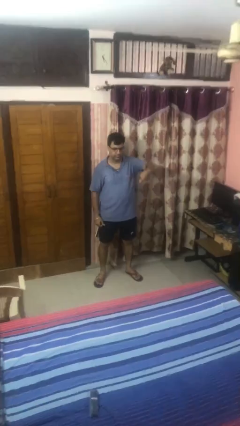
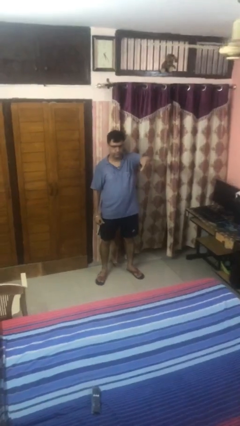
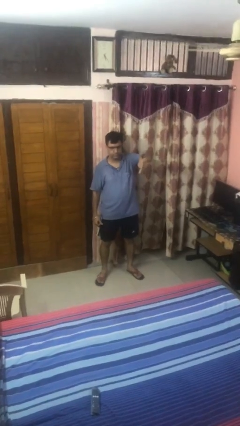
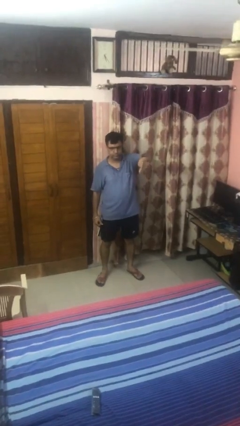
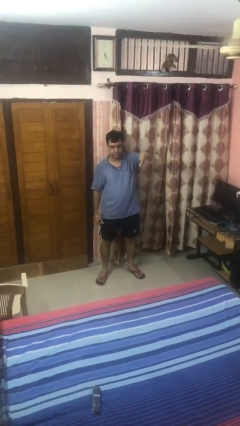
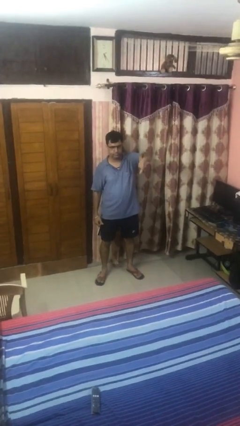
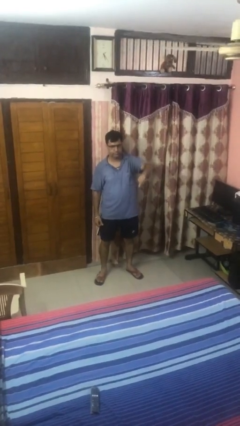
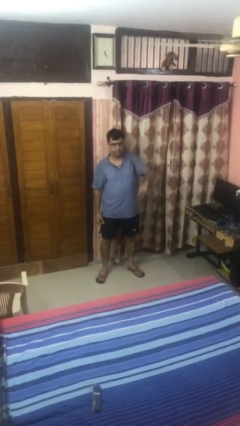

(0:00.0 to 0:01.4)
person gestures thumbs down

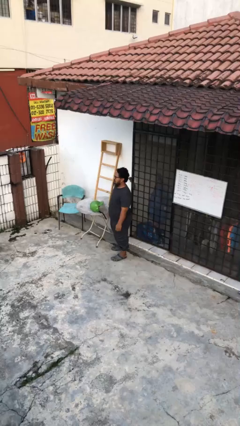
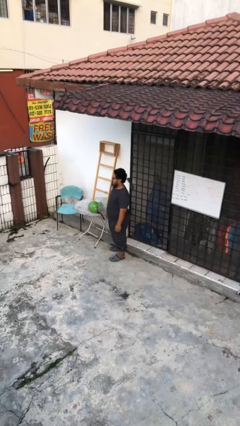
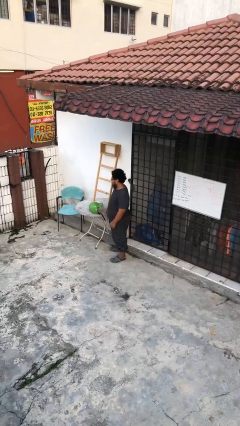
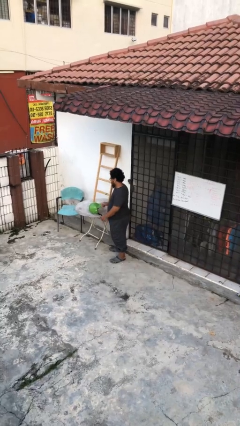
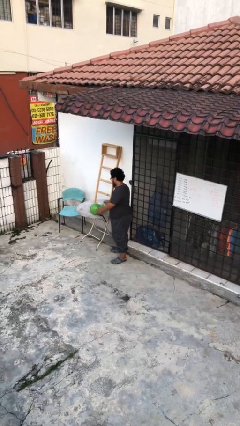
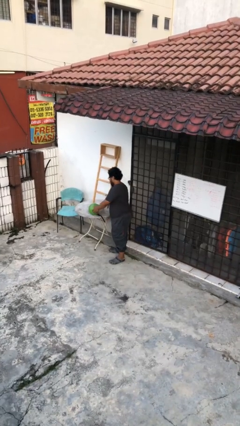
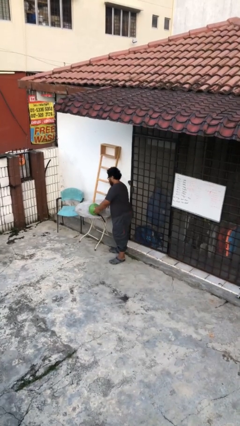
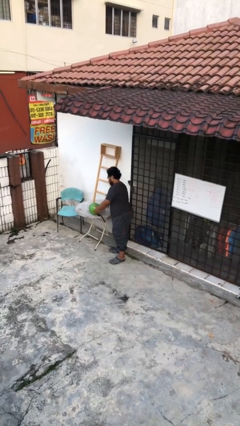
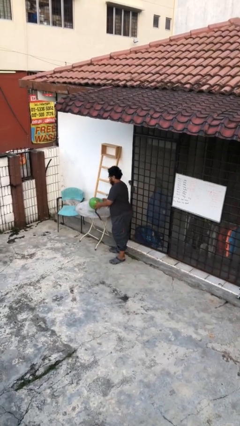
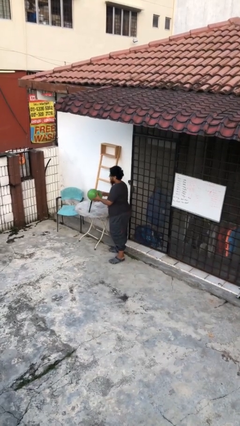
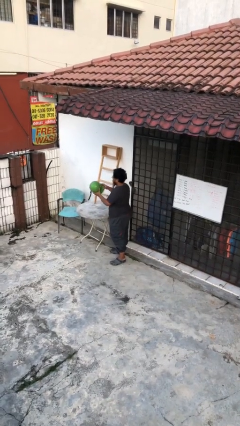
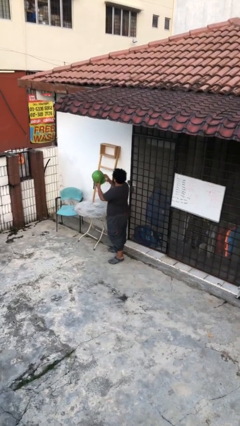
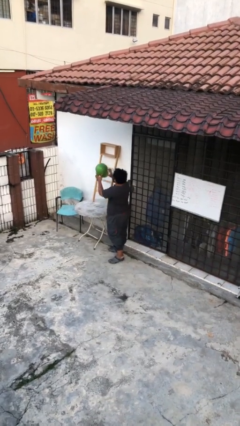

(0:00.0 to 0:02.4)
person picks up object from table

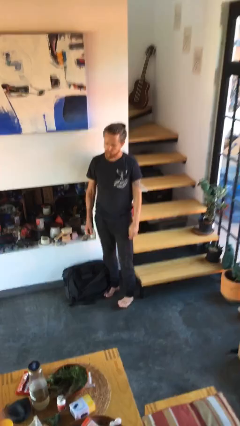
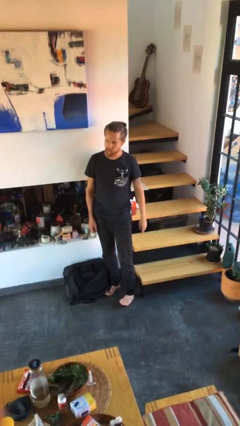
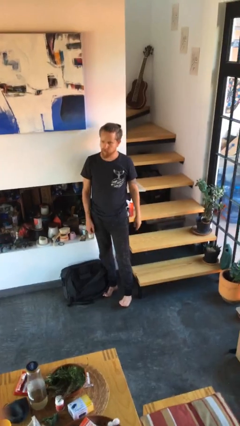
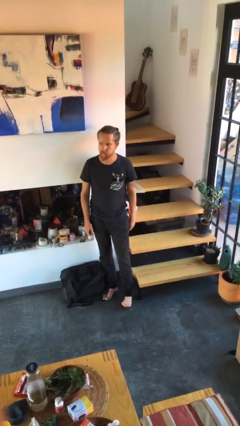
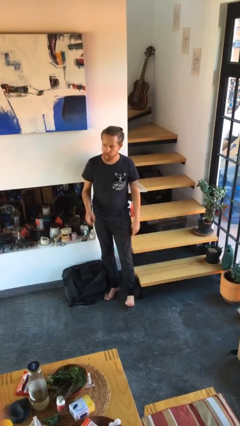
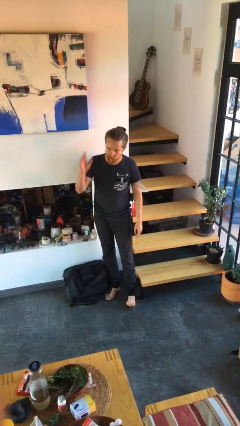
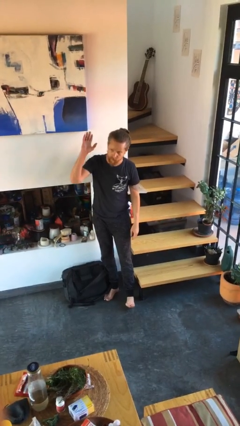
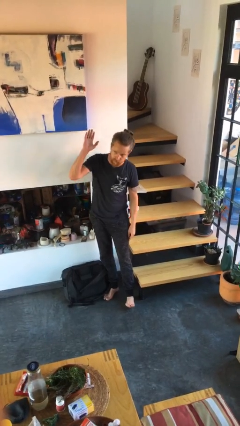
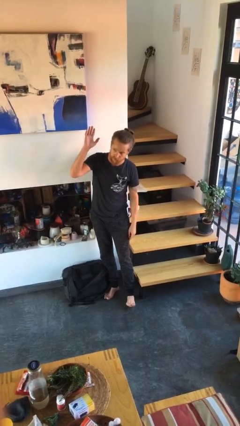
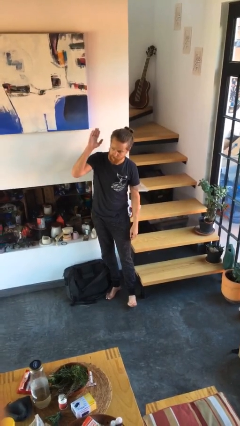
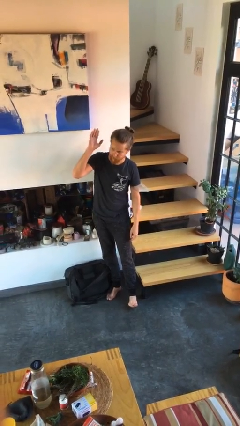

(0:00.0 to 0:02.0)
person gestures raise hand

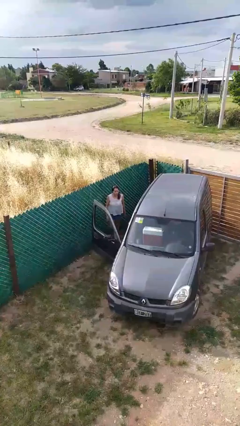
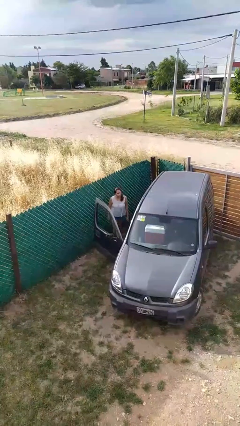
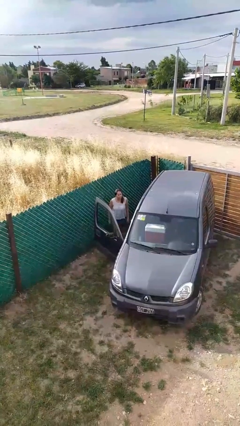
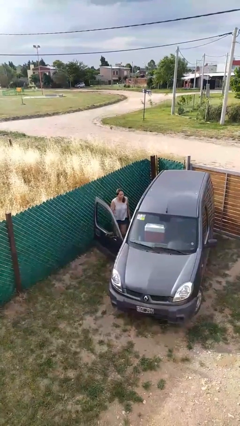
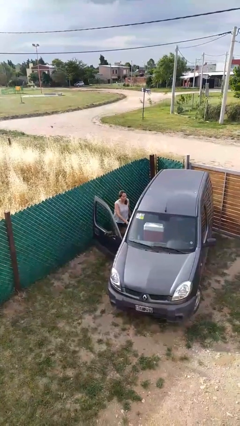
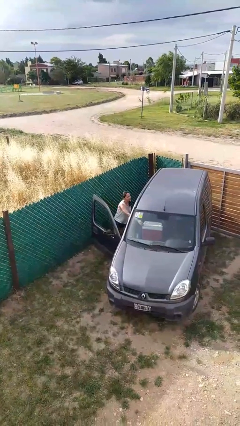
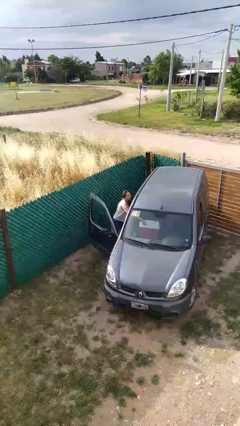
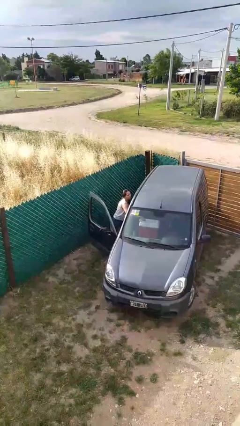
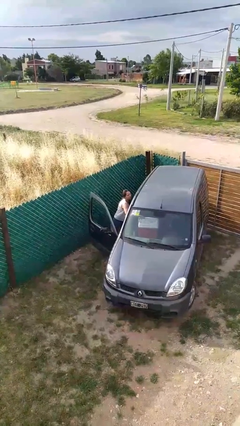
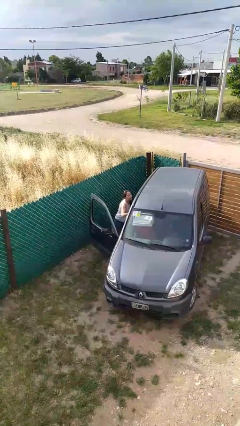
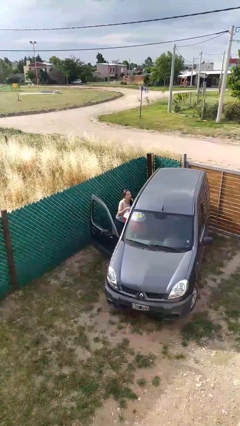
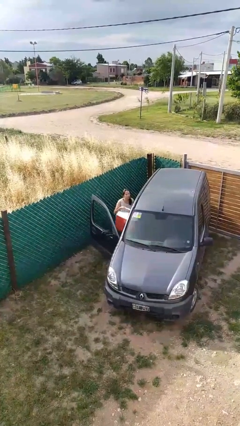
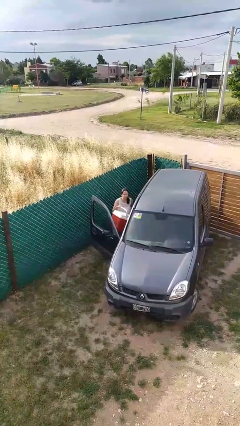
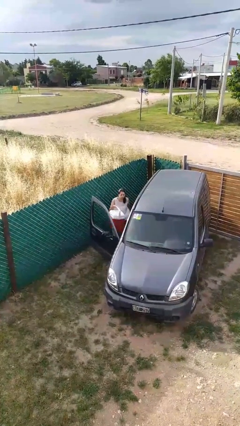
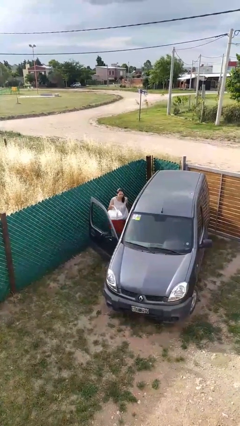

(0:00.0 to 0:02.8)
person unloads car

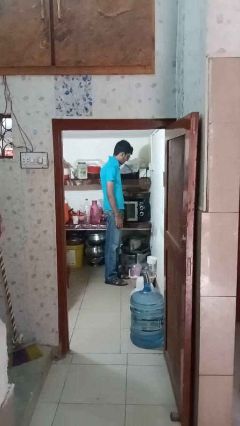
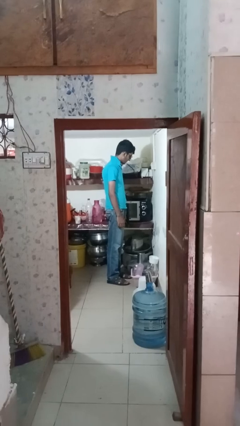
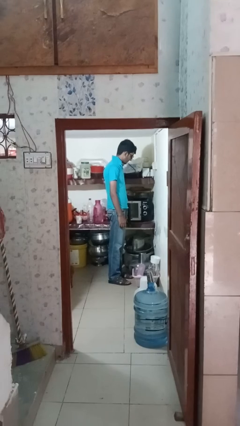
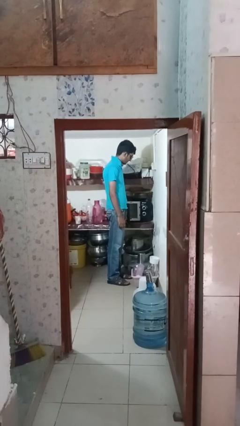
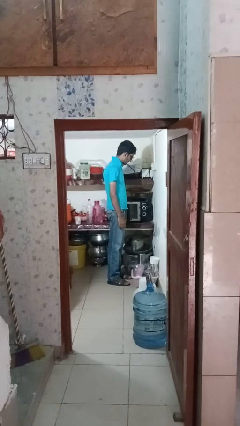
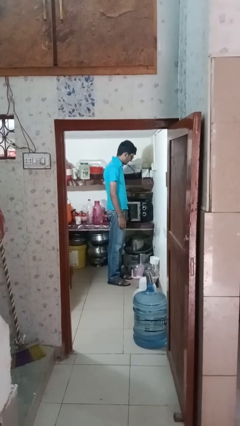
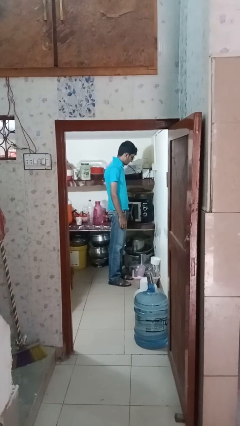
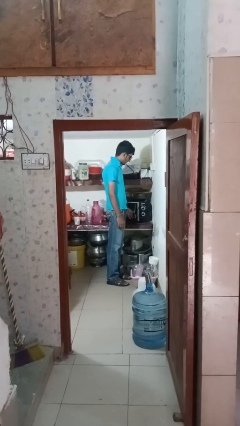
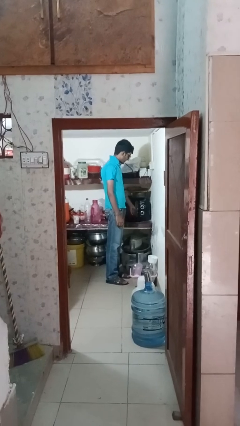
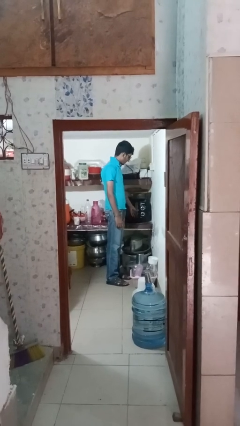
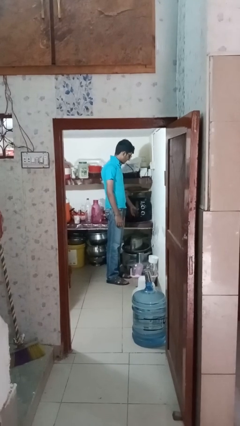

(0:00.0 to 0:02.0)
person opens oven door

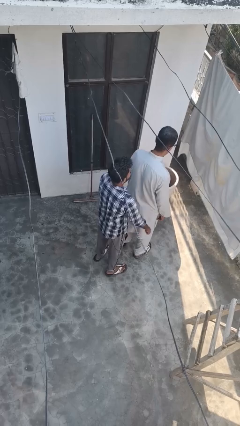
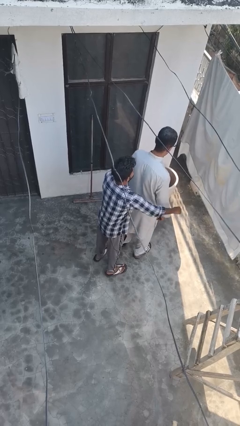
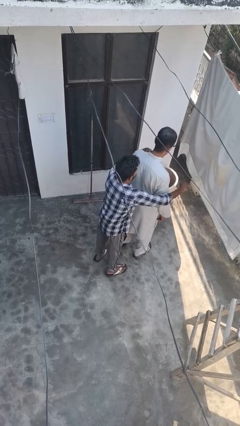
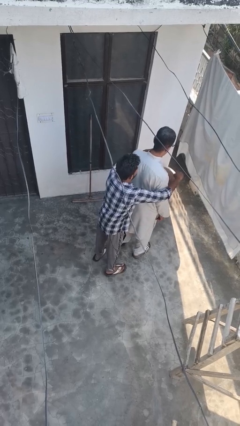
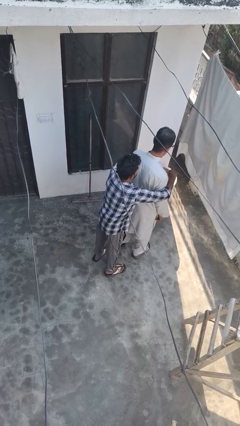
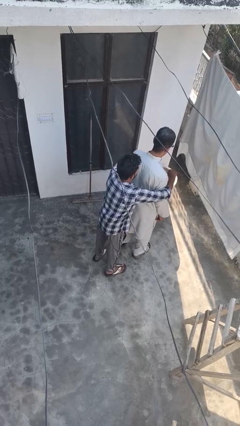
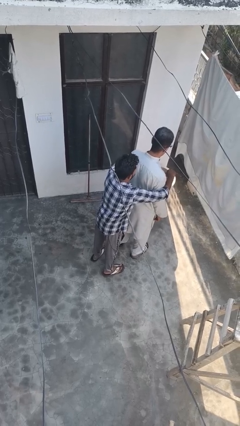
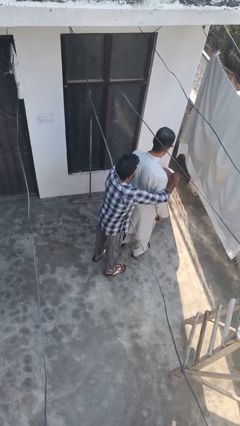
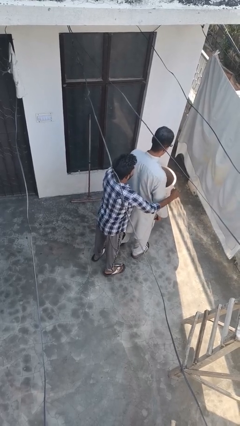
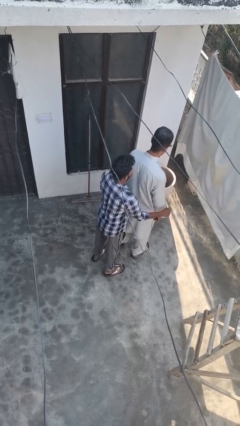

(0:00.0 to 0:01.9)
person hugs person from behind

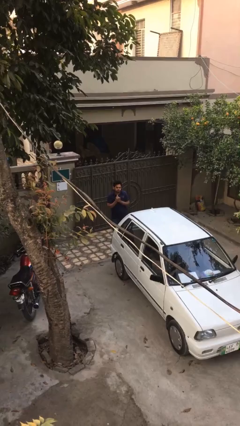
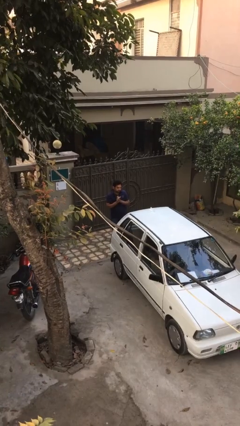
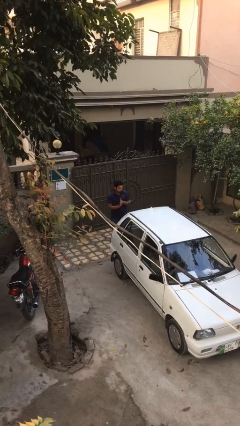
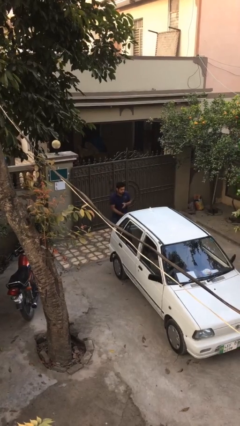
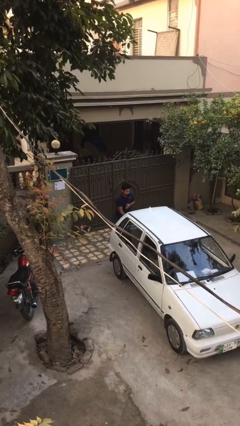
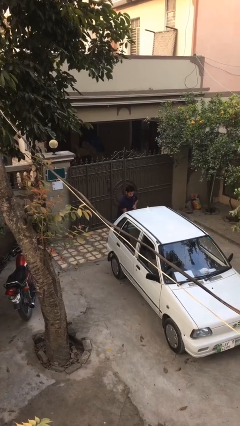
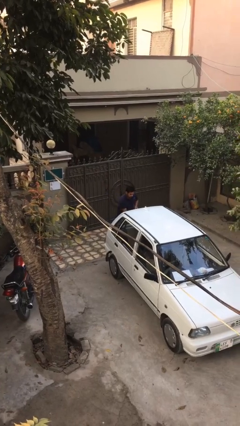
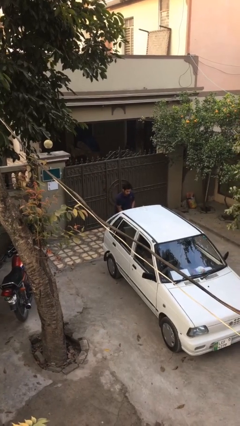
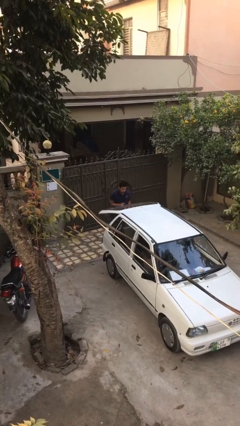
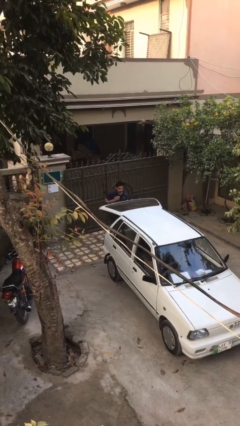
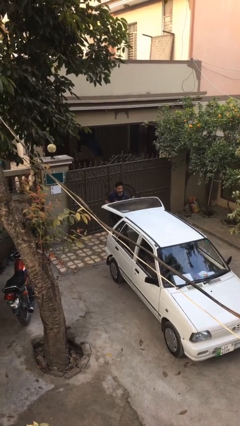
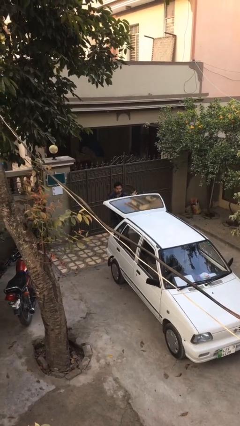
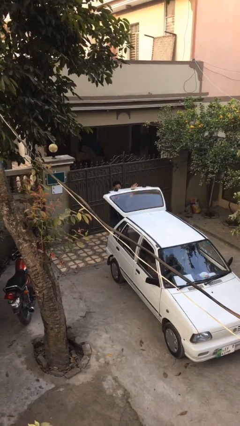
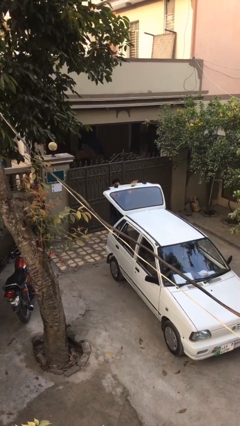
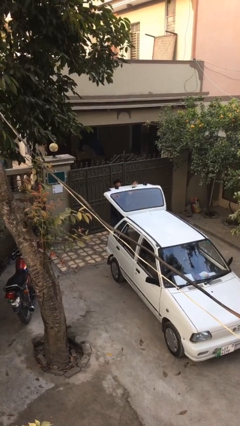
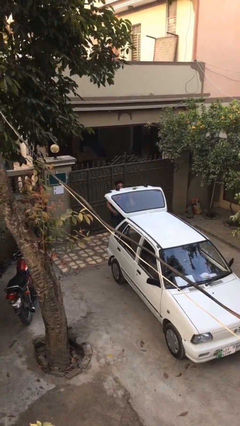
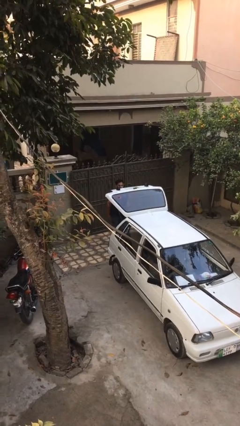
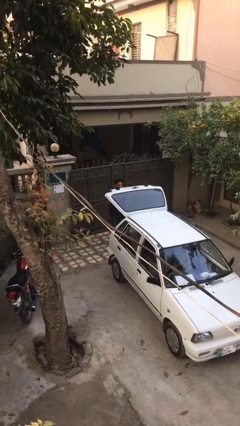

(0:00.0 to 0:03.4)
person opens car trunk

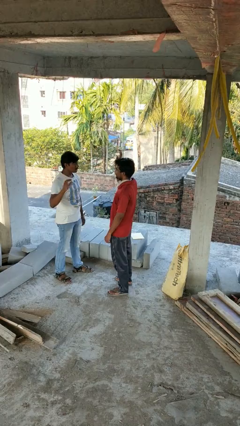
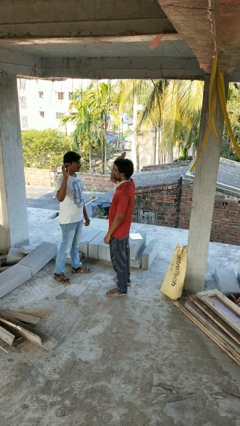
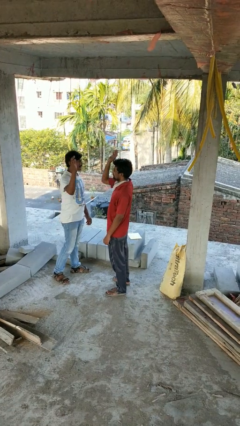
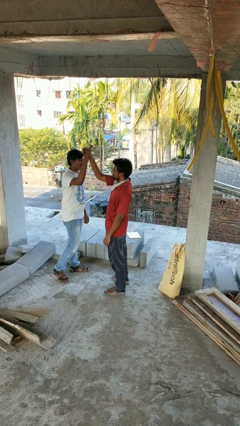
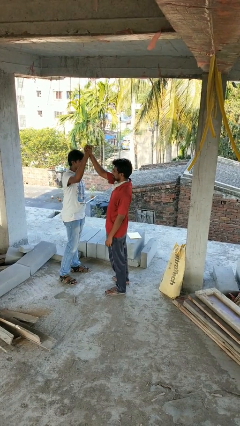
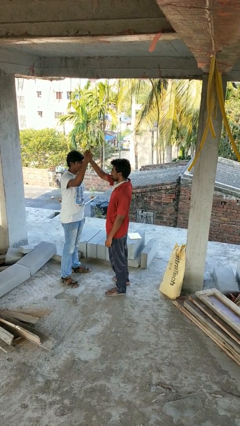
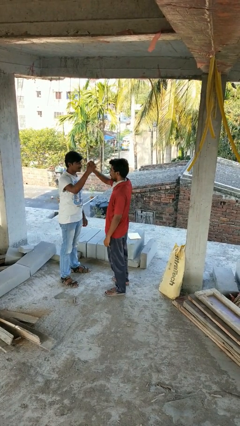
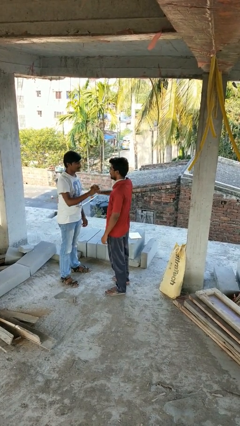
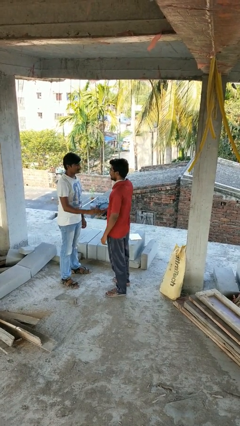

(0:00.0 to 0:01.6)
person highfives hand
